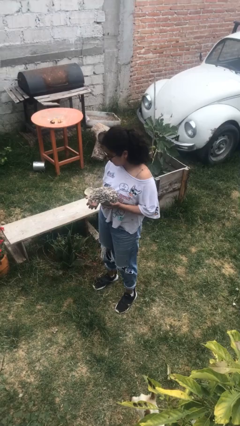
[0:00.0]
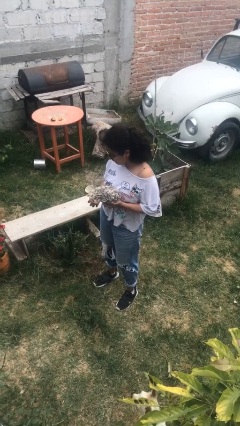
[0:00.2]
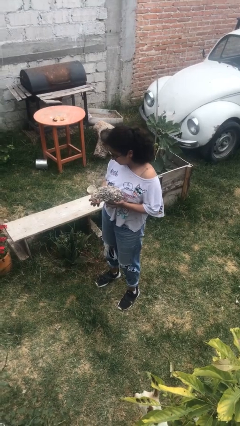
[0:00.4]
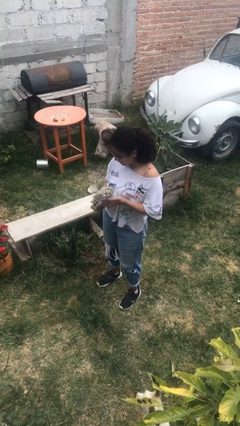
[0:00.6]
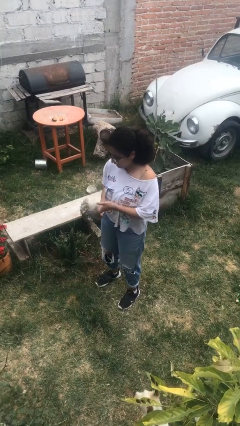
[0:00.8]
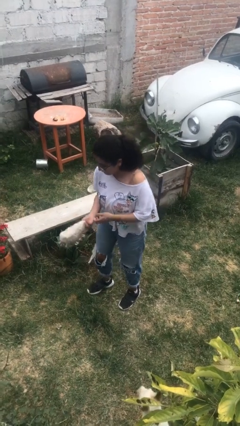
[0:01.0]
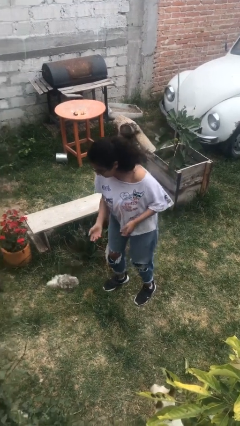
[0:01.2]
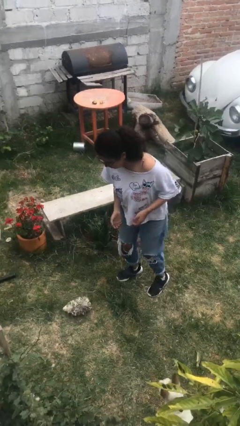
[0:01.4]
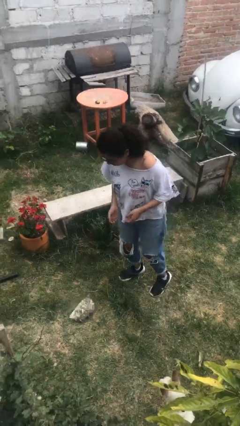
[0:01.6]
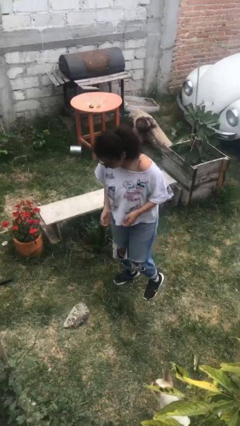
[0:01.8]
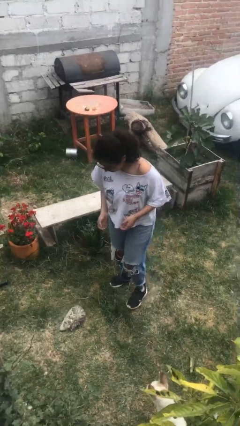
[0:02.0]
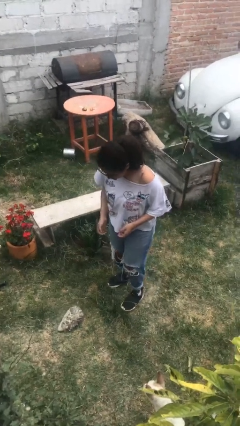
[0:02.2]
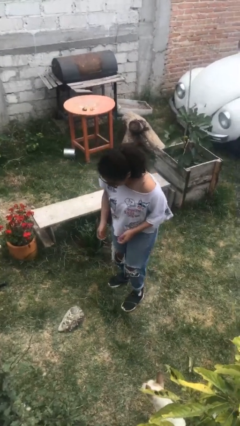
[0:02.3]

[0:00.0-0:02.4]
person drops object

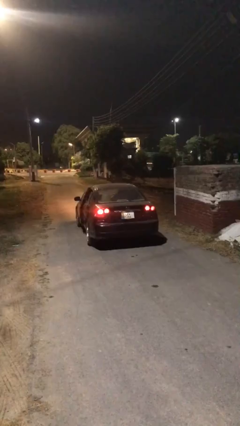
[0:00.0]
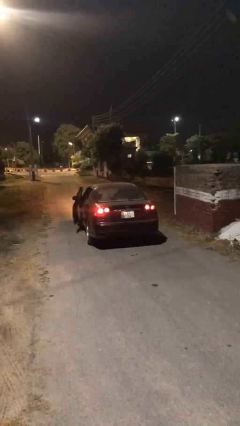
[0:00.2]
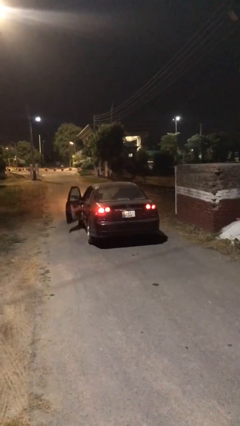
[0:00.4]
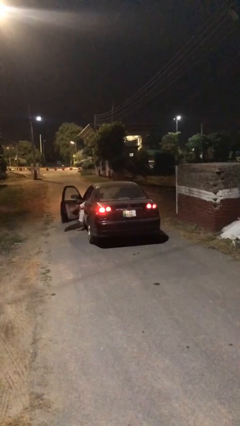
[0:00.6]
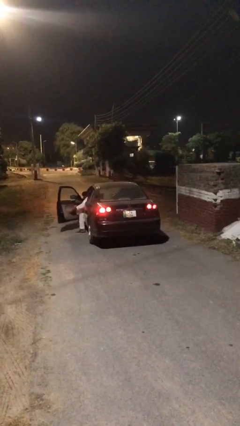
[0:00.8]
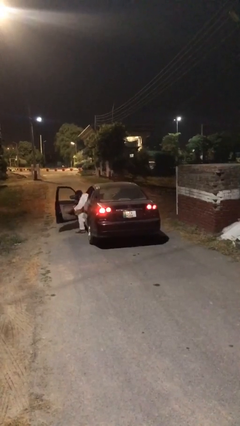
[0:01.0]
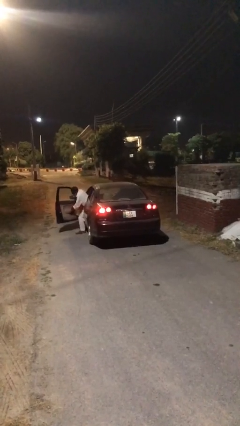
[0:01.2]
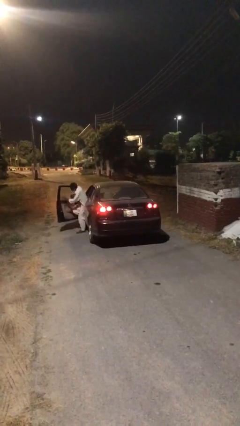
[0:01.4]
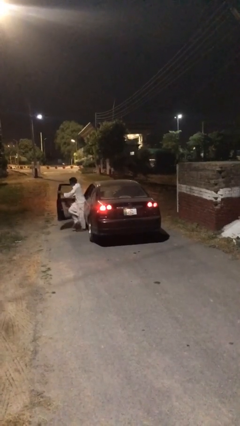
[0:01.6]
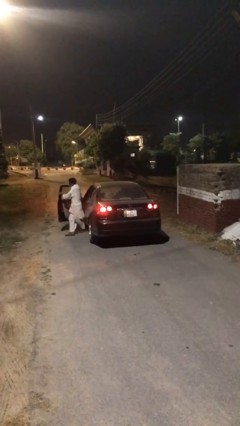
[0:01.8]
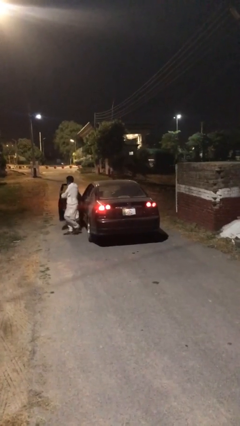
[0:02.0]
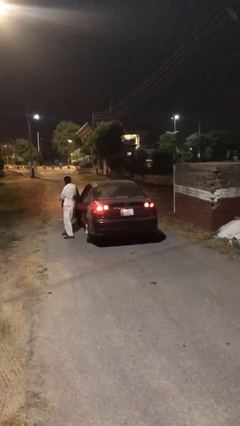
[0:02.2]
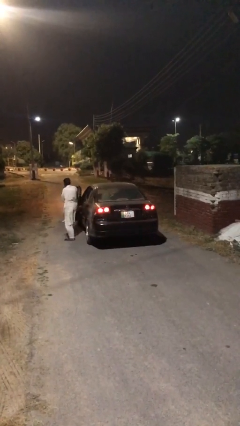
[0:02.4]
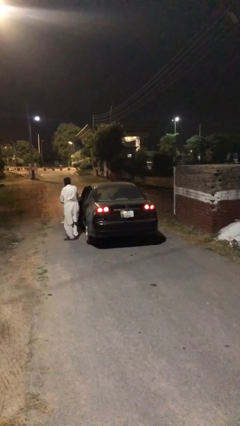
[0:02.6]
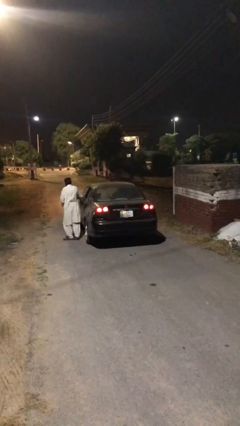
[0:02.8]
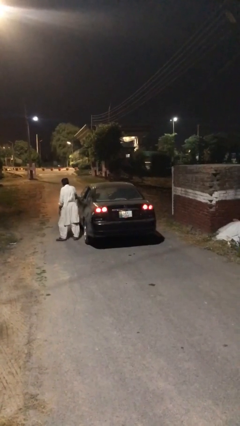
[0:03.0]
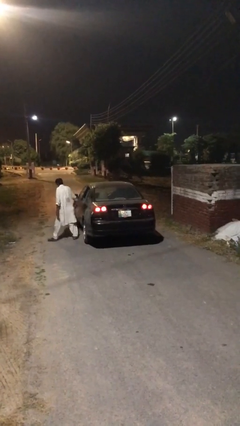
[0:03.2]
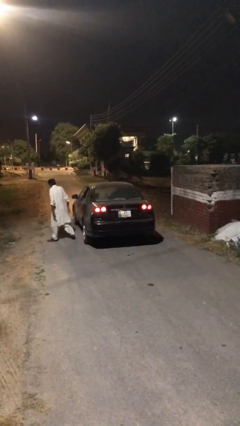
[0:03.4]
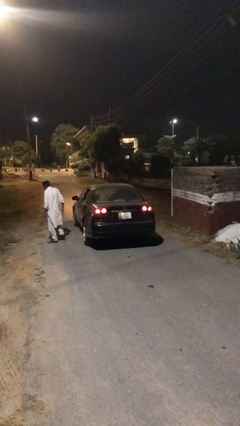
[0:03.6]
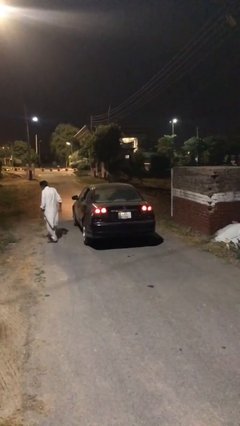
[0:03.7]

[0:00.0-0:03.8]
car drops off person

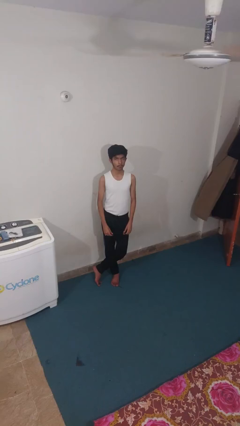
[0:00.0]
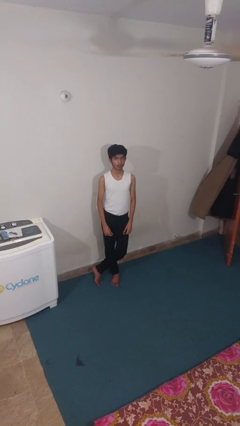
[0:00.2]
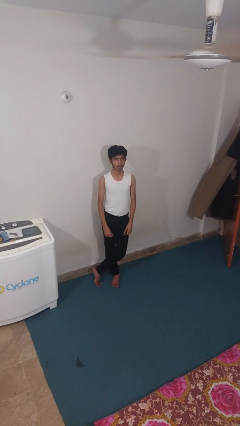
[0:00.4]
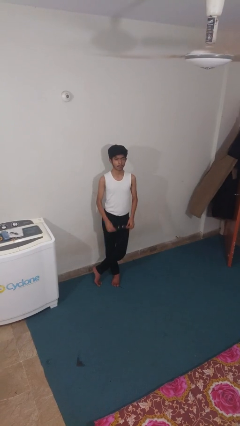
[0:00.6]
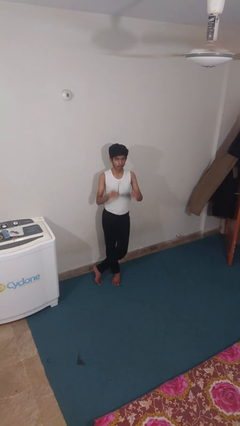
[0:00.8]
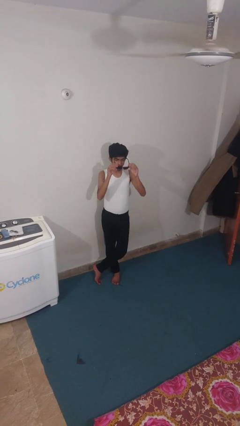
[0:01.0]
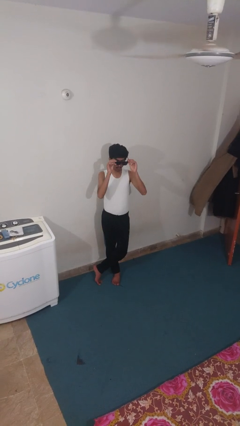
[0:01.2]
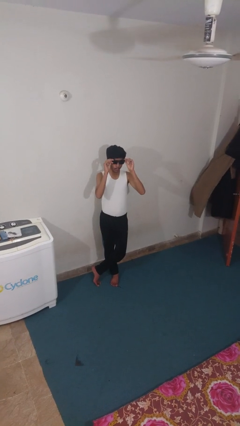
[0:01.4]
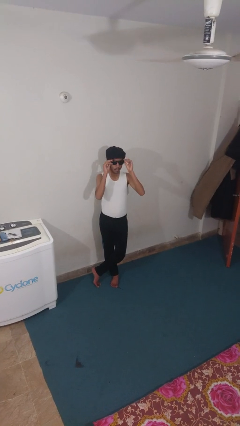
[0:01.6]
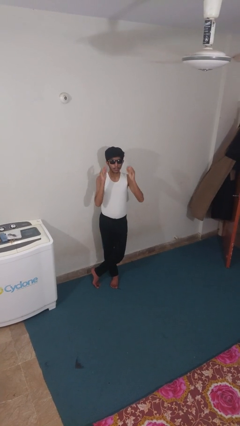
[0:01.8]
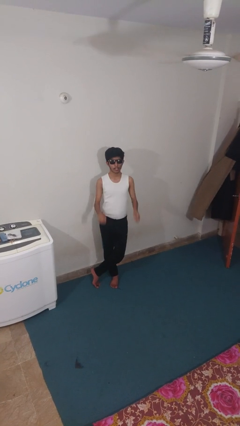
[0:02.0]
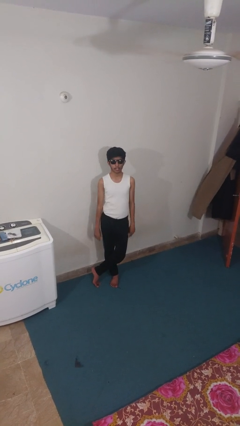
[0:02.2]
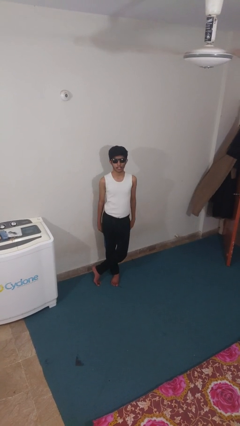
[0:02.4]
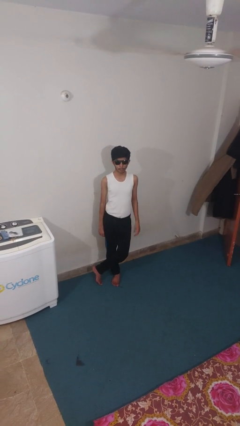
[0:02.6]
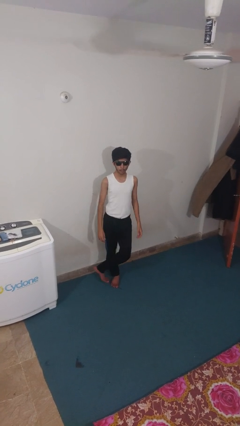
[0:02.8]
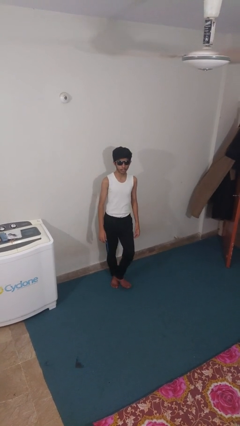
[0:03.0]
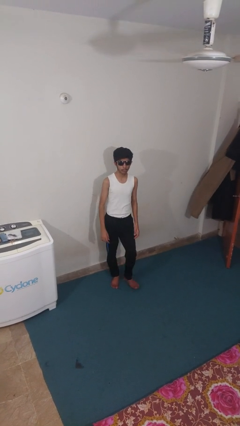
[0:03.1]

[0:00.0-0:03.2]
person puts on sunglasses

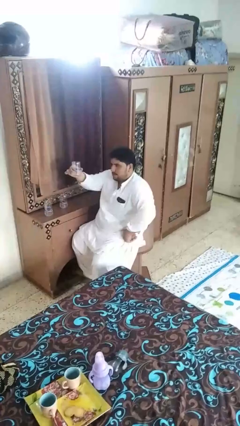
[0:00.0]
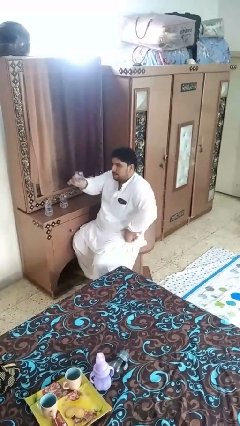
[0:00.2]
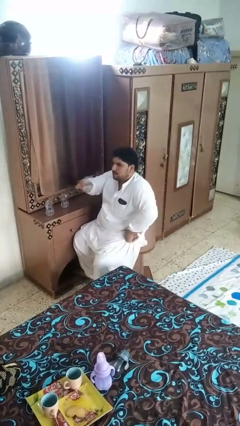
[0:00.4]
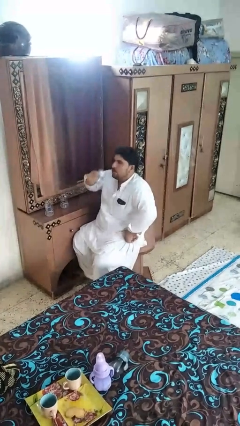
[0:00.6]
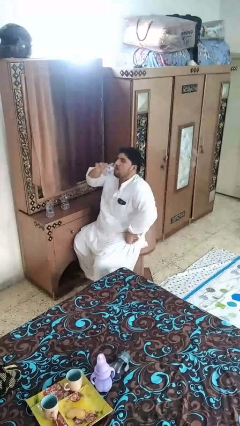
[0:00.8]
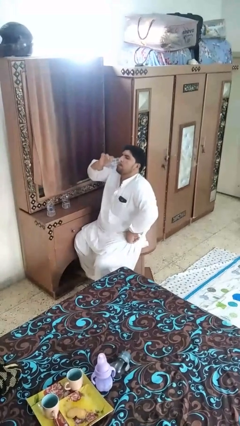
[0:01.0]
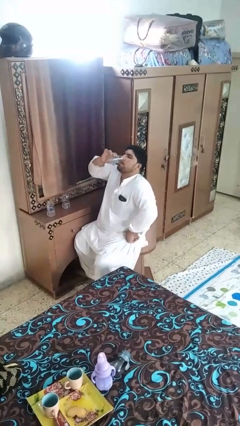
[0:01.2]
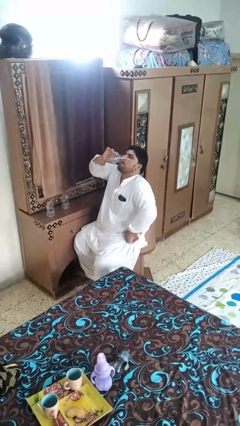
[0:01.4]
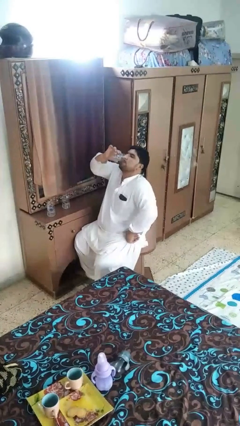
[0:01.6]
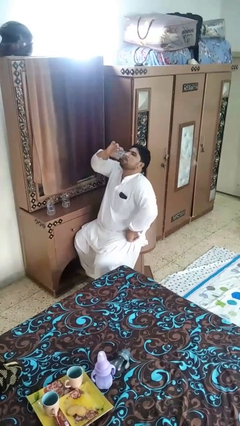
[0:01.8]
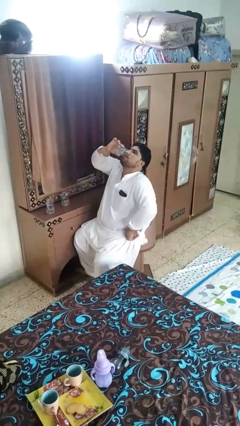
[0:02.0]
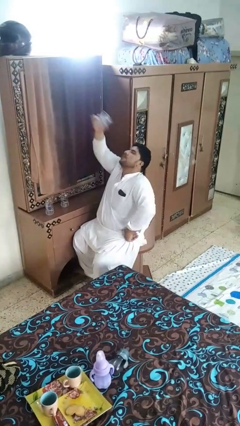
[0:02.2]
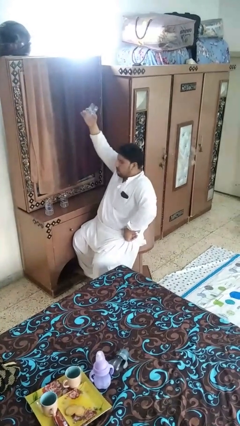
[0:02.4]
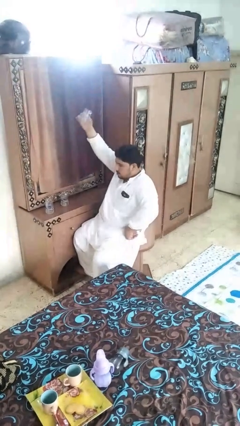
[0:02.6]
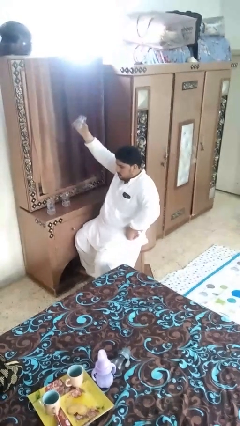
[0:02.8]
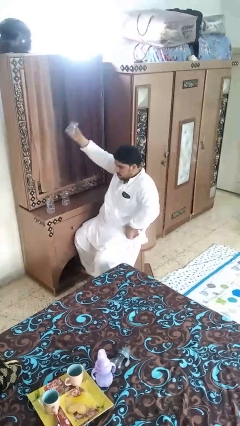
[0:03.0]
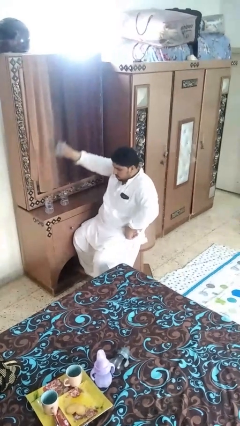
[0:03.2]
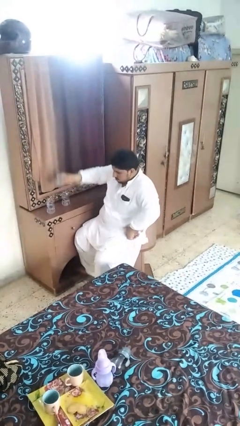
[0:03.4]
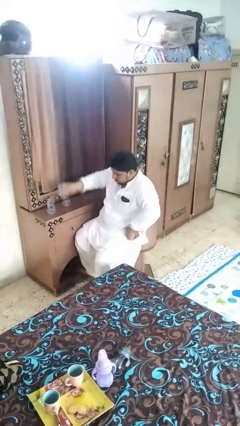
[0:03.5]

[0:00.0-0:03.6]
person drinks from shotglass

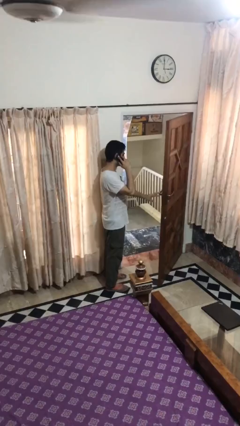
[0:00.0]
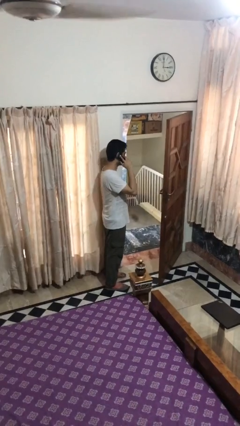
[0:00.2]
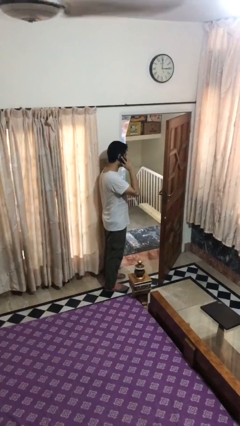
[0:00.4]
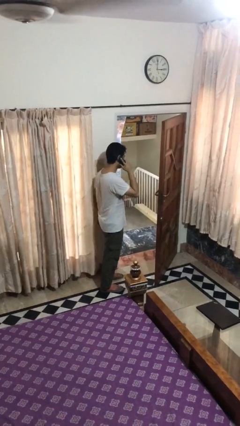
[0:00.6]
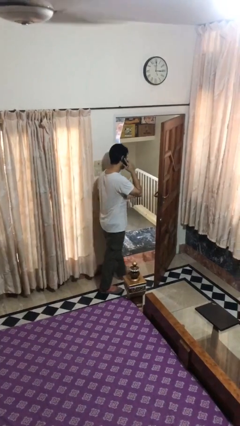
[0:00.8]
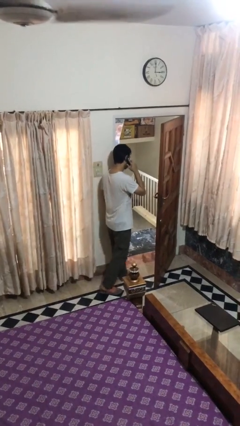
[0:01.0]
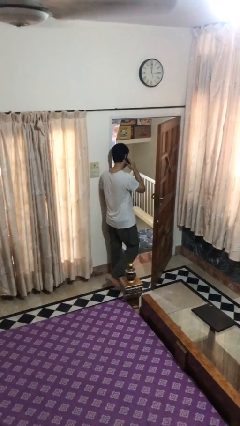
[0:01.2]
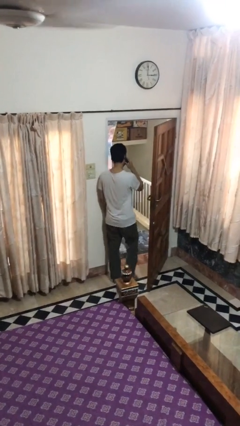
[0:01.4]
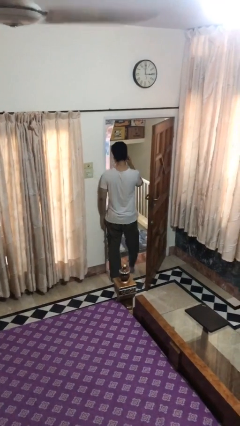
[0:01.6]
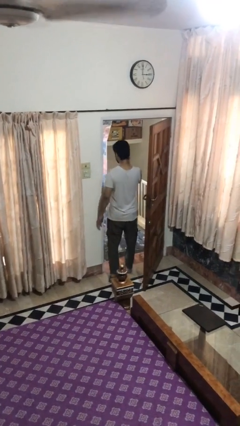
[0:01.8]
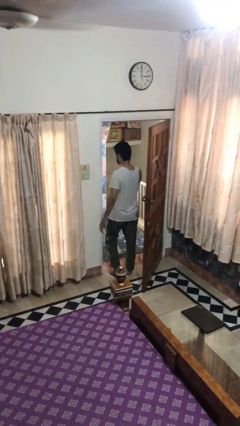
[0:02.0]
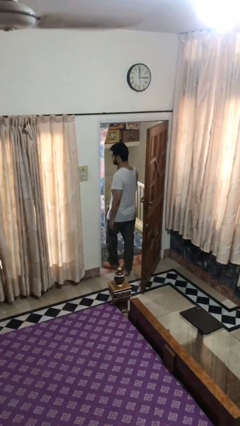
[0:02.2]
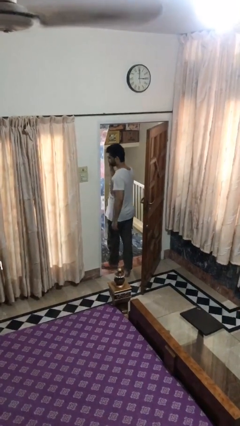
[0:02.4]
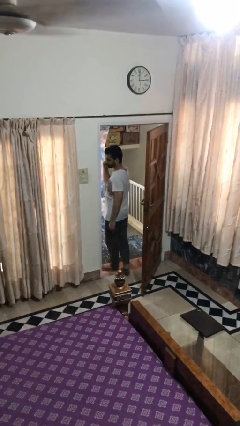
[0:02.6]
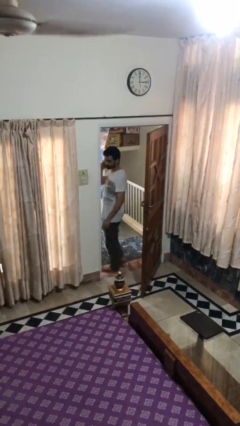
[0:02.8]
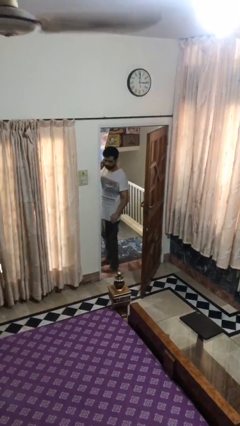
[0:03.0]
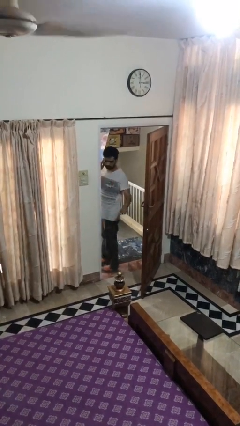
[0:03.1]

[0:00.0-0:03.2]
person exits scene through structure

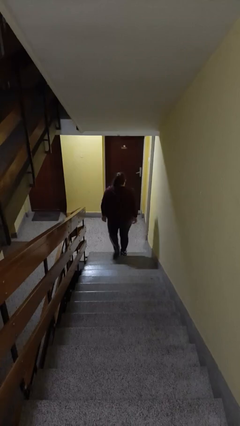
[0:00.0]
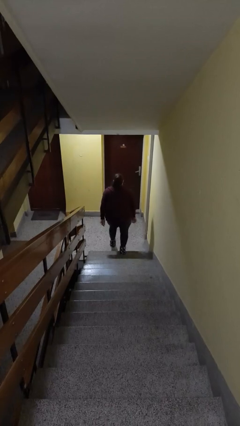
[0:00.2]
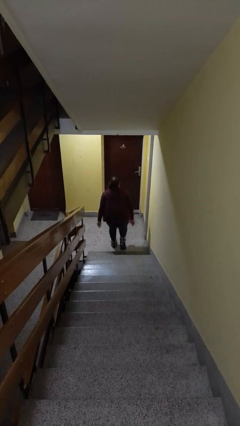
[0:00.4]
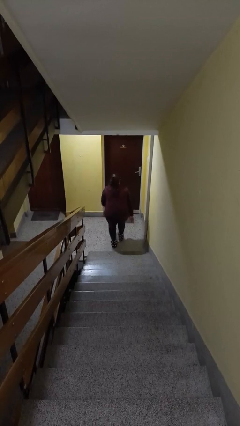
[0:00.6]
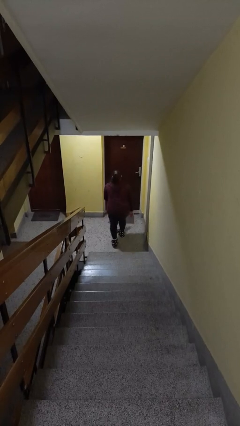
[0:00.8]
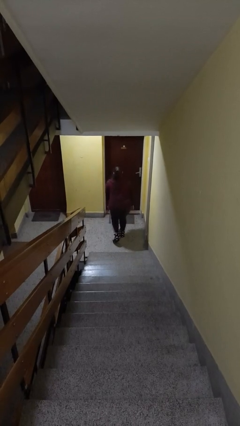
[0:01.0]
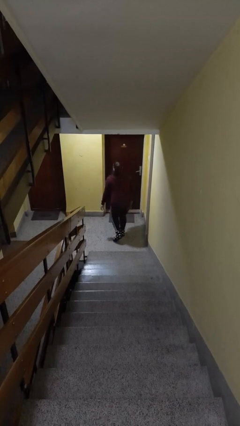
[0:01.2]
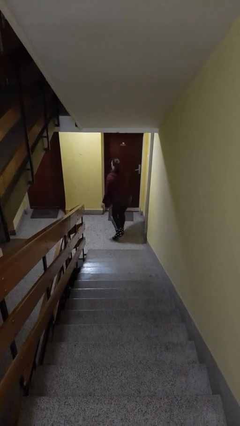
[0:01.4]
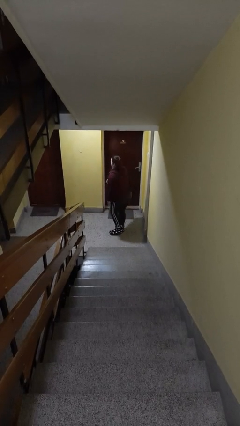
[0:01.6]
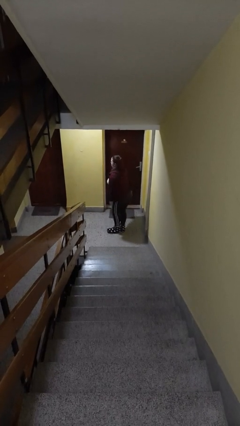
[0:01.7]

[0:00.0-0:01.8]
person trips on stair
